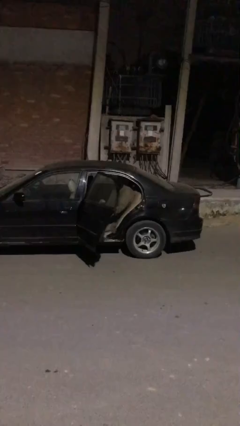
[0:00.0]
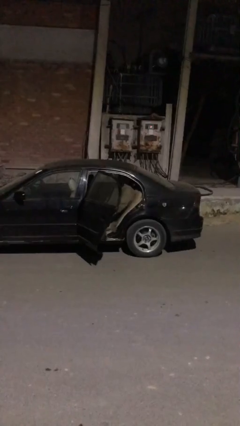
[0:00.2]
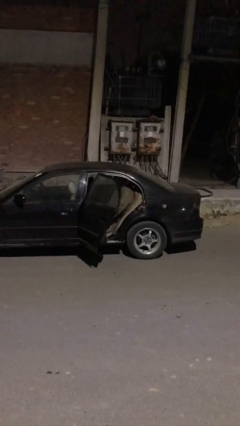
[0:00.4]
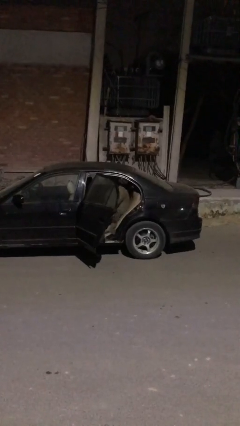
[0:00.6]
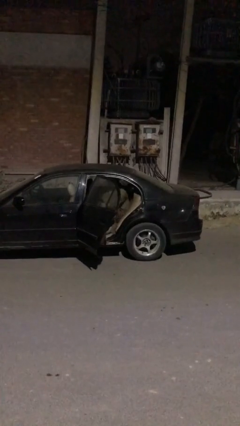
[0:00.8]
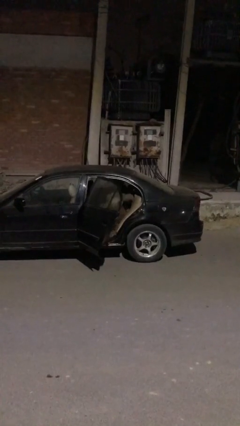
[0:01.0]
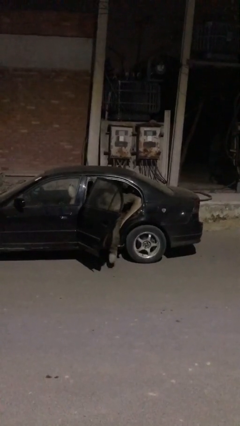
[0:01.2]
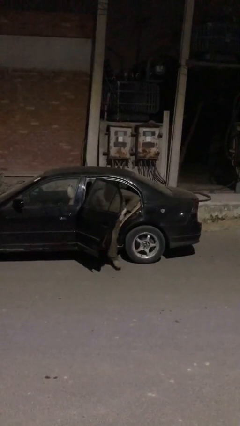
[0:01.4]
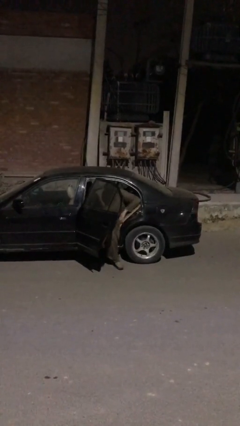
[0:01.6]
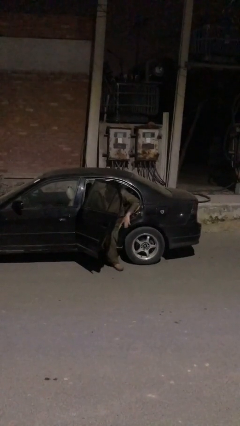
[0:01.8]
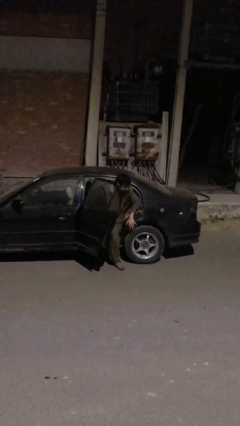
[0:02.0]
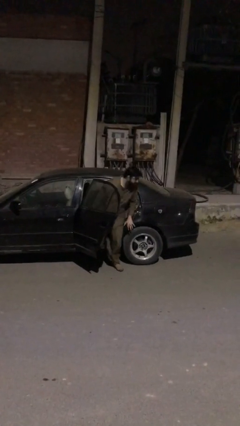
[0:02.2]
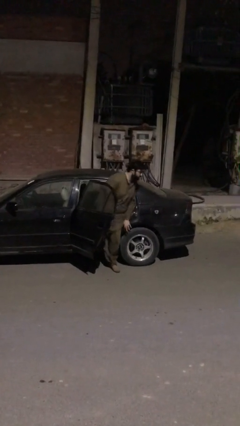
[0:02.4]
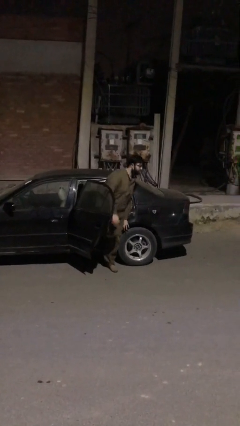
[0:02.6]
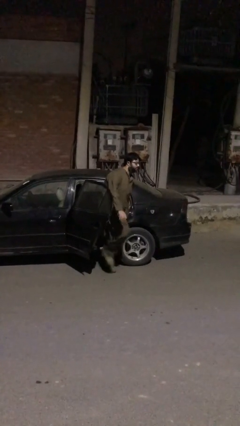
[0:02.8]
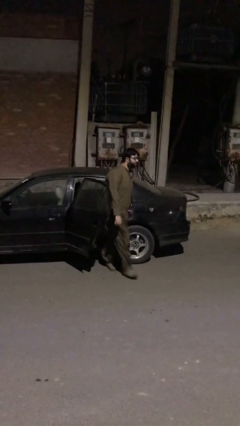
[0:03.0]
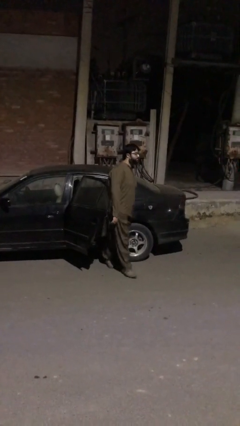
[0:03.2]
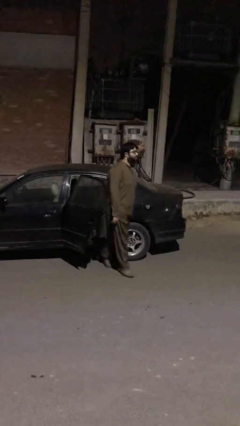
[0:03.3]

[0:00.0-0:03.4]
person exits car

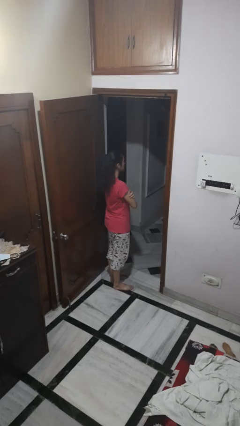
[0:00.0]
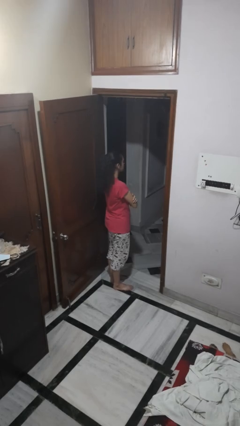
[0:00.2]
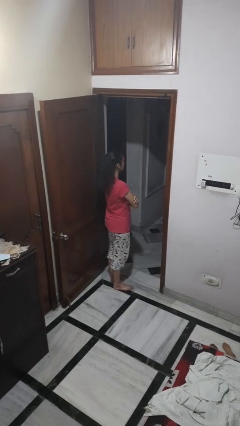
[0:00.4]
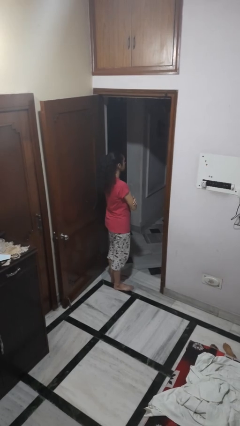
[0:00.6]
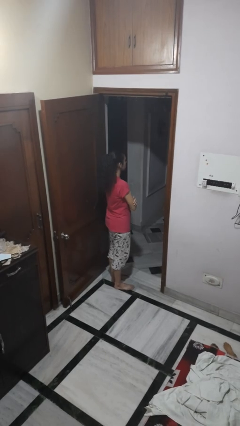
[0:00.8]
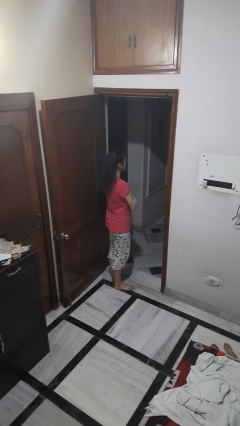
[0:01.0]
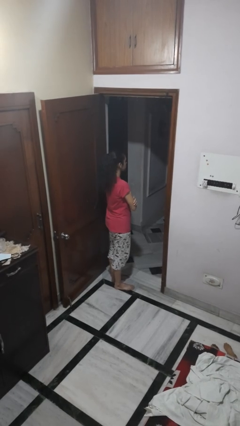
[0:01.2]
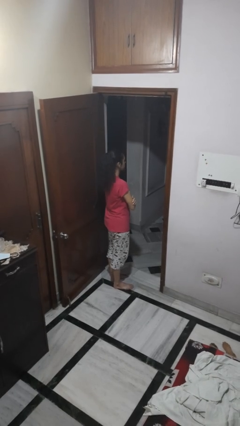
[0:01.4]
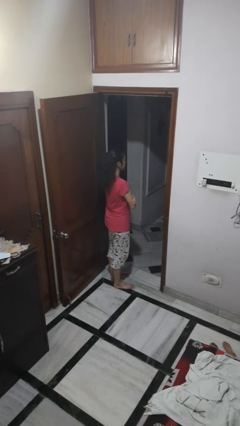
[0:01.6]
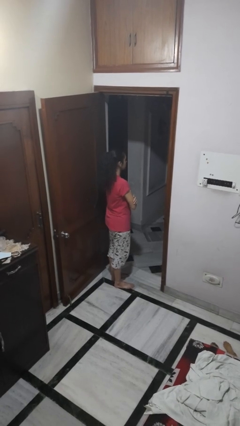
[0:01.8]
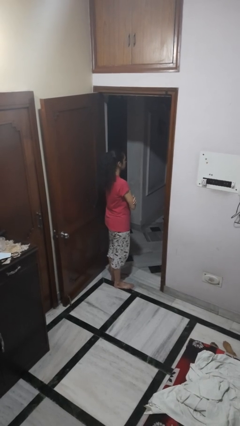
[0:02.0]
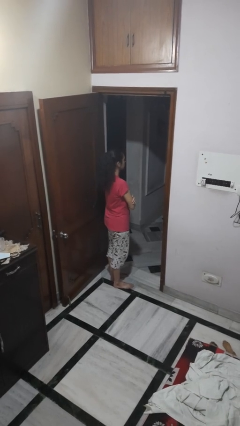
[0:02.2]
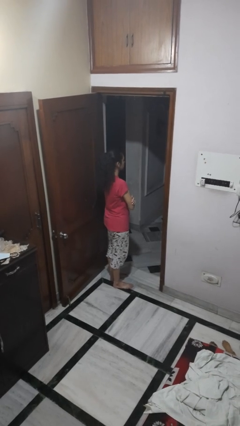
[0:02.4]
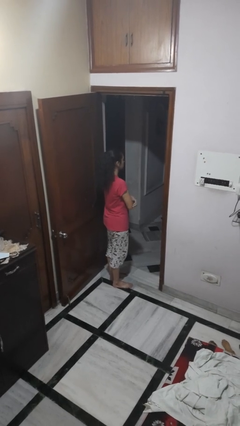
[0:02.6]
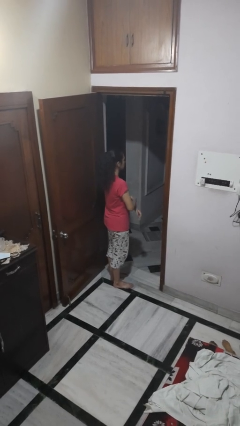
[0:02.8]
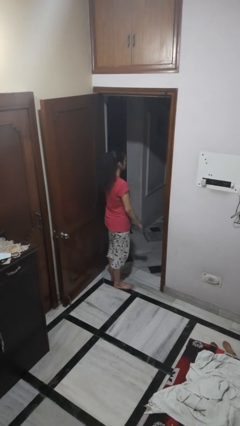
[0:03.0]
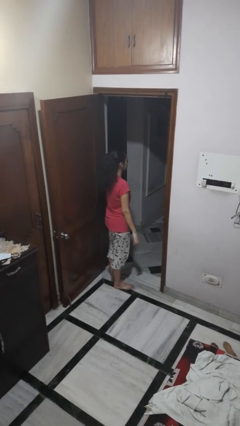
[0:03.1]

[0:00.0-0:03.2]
person crosses arms

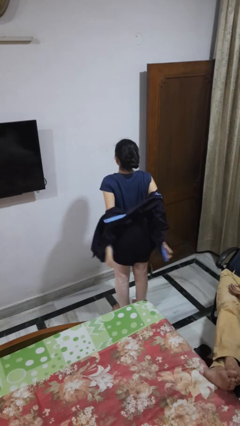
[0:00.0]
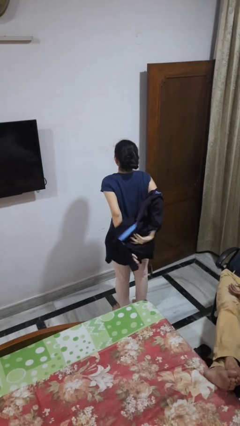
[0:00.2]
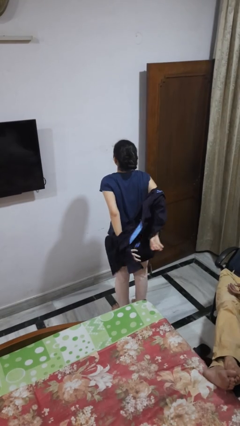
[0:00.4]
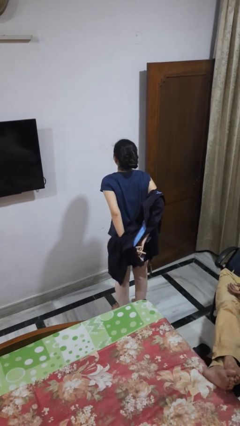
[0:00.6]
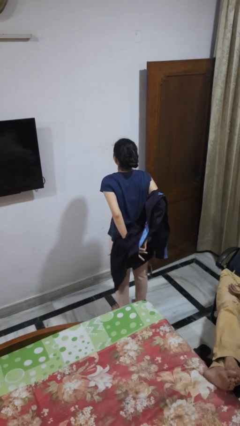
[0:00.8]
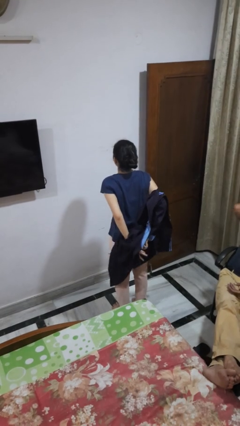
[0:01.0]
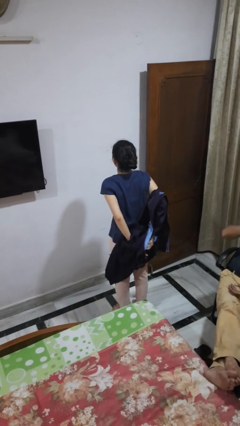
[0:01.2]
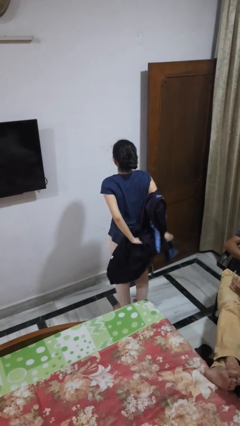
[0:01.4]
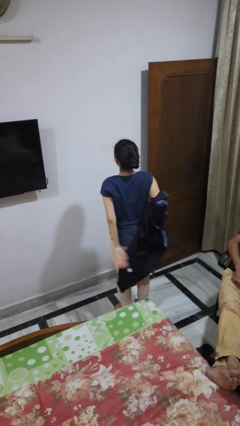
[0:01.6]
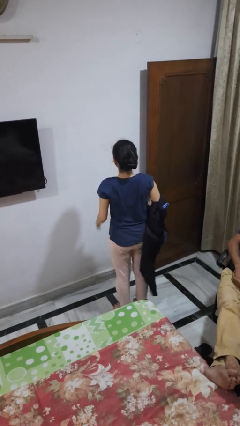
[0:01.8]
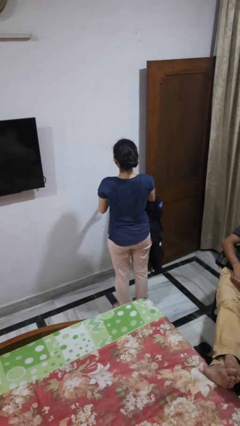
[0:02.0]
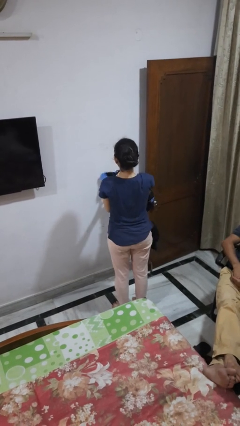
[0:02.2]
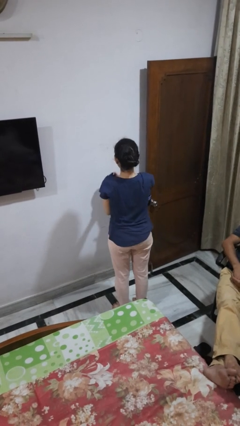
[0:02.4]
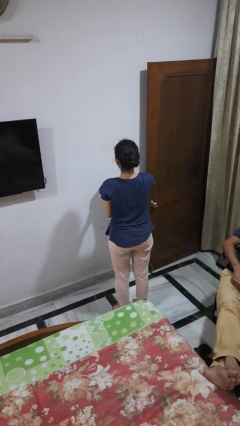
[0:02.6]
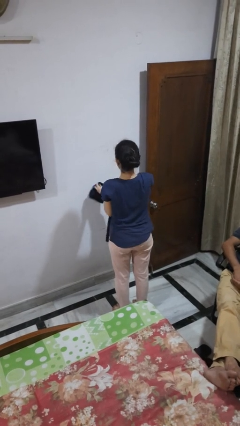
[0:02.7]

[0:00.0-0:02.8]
person takes off shirt

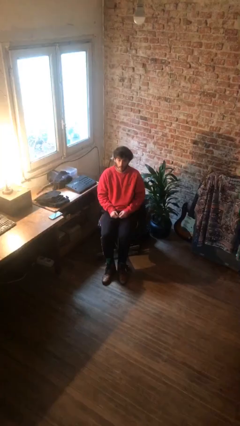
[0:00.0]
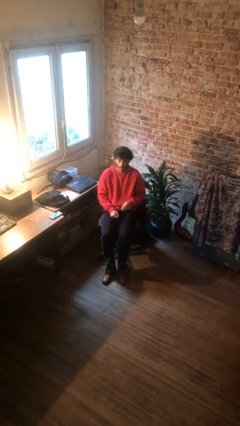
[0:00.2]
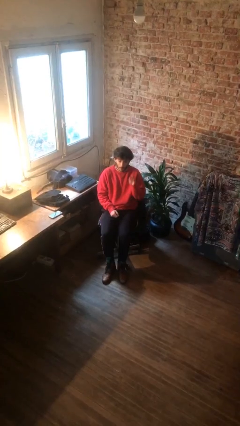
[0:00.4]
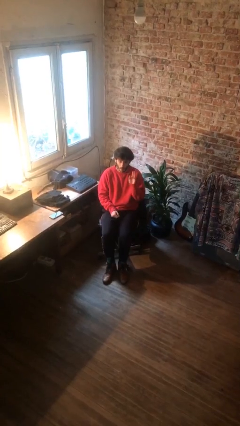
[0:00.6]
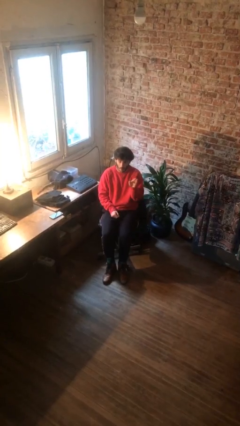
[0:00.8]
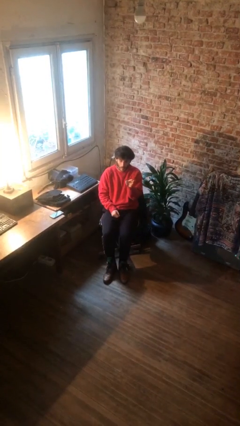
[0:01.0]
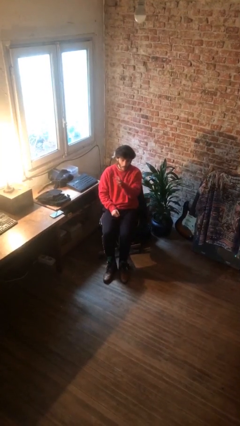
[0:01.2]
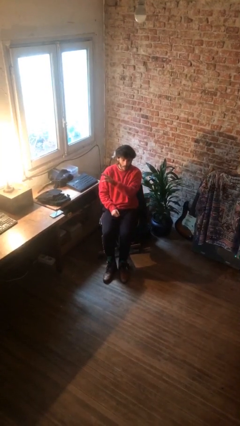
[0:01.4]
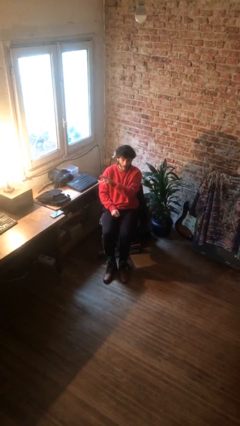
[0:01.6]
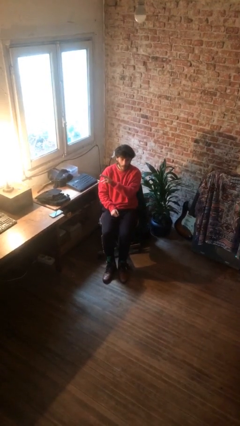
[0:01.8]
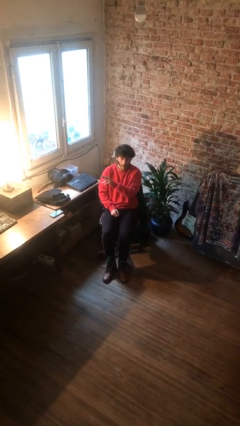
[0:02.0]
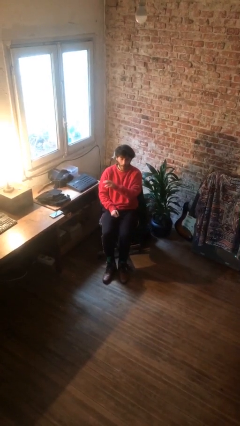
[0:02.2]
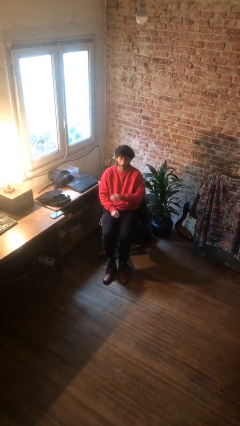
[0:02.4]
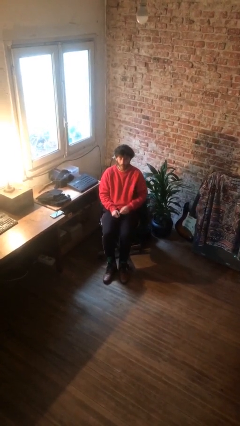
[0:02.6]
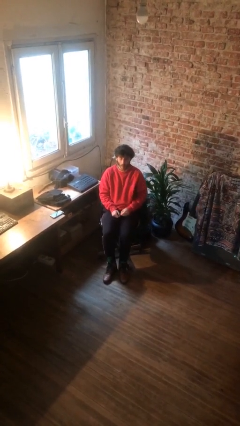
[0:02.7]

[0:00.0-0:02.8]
person gestures swipe right

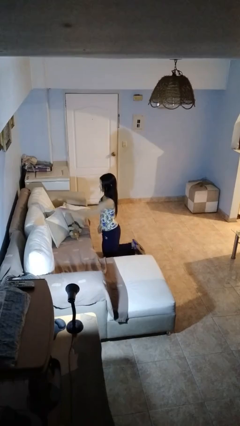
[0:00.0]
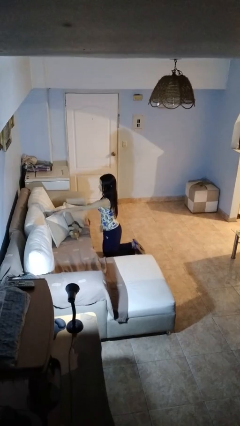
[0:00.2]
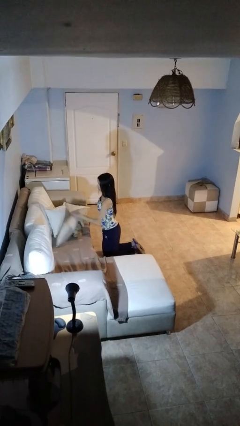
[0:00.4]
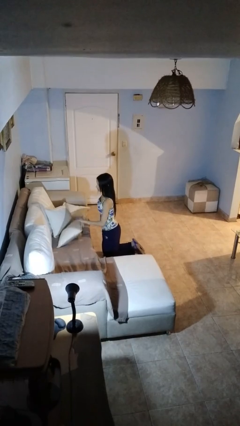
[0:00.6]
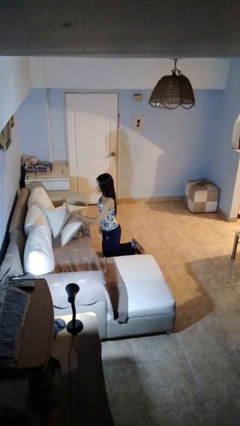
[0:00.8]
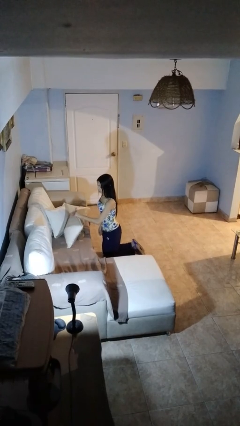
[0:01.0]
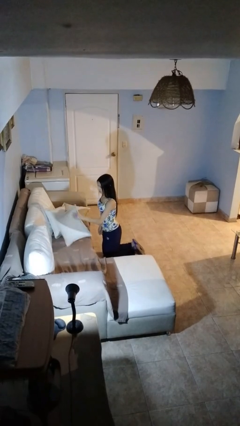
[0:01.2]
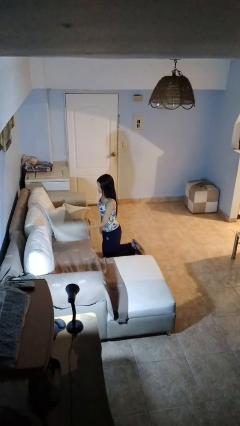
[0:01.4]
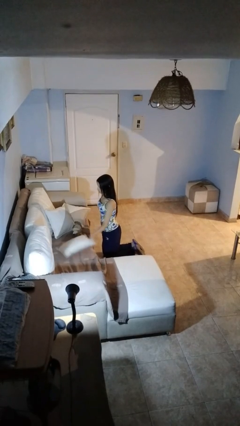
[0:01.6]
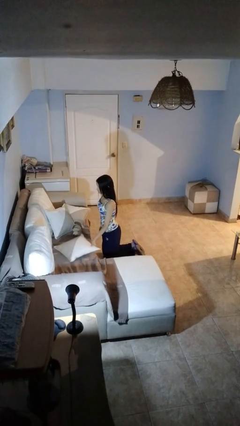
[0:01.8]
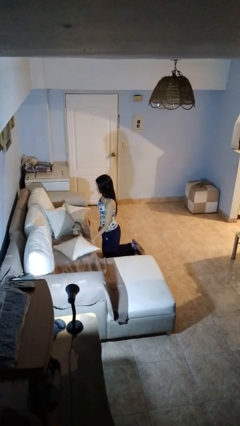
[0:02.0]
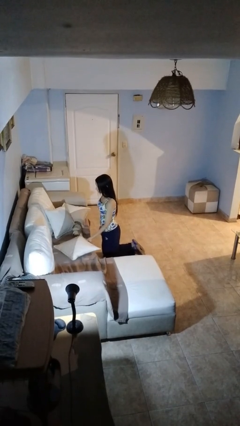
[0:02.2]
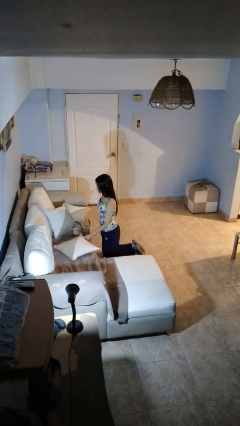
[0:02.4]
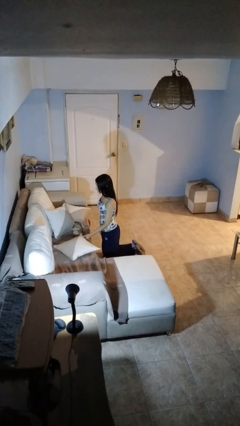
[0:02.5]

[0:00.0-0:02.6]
person searches in couch

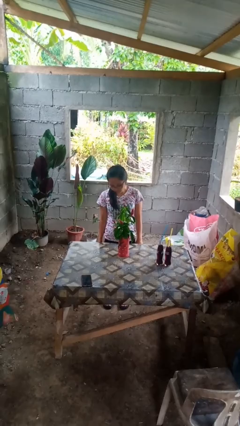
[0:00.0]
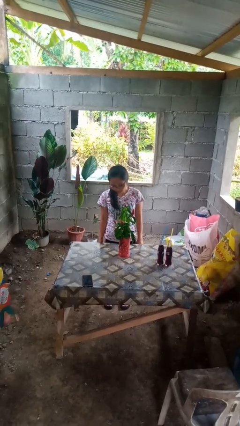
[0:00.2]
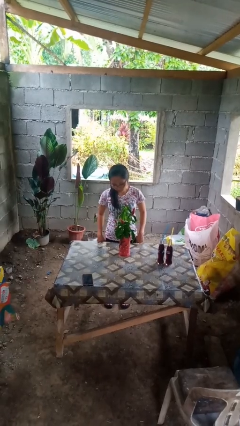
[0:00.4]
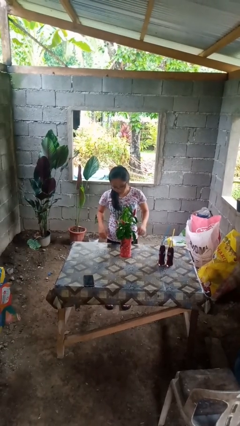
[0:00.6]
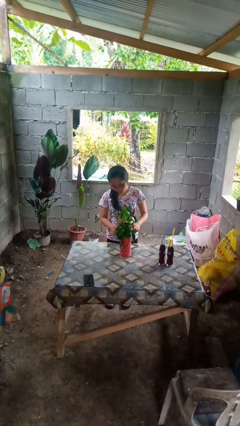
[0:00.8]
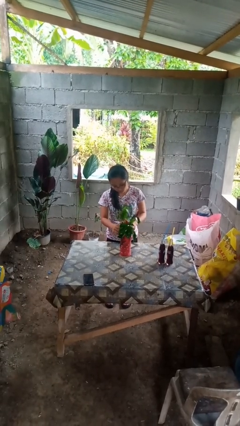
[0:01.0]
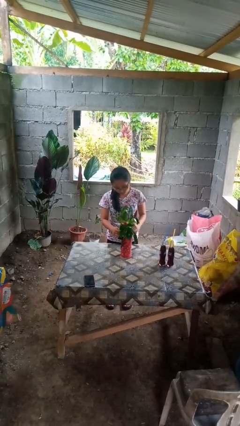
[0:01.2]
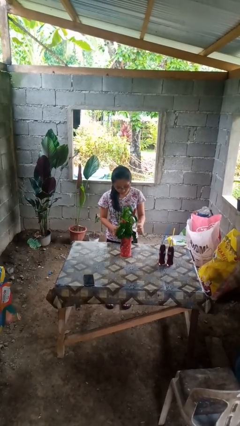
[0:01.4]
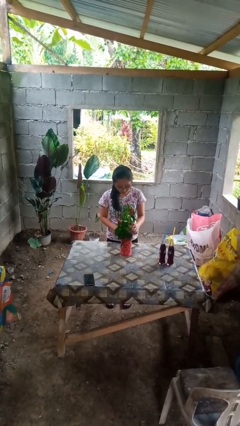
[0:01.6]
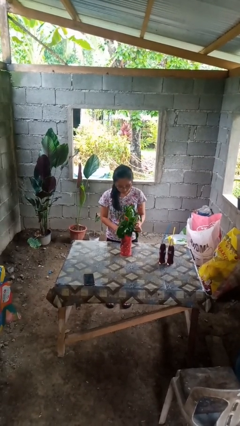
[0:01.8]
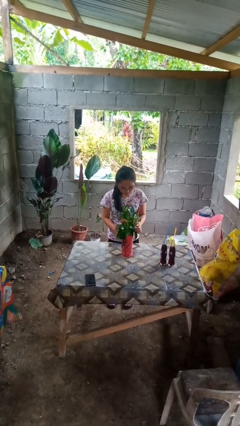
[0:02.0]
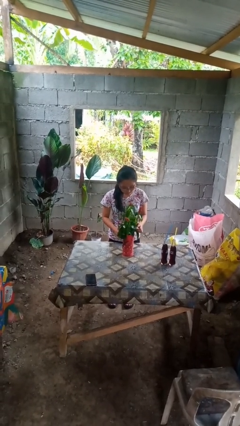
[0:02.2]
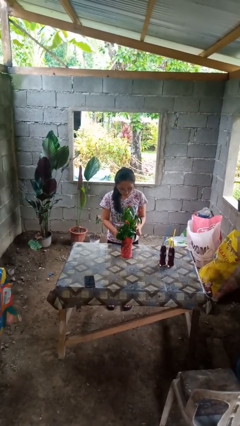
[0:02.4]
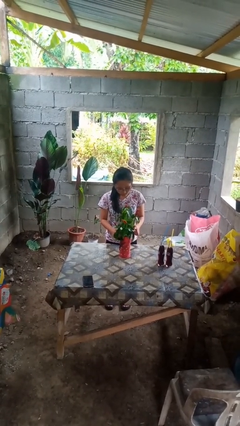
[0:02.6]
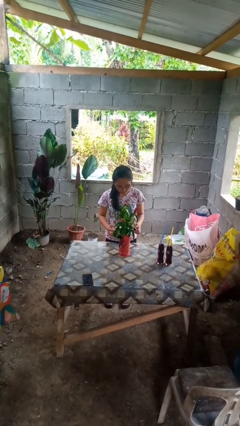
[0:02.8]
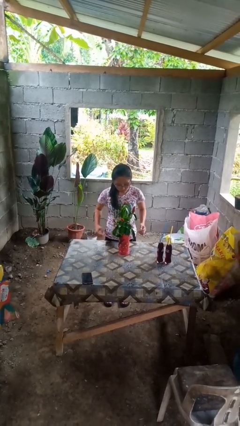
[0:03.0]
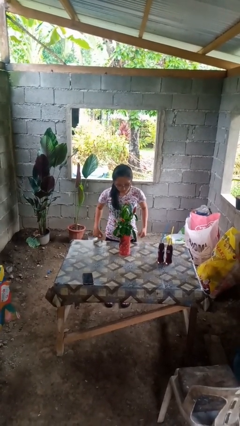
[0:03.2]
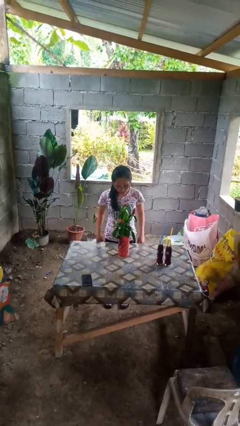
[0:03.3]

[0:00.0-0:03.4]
person arranges flowers in vase
